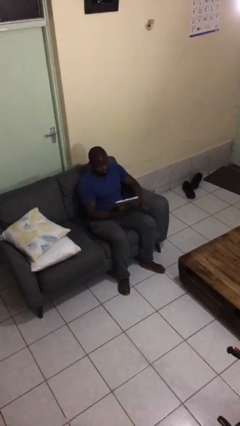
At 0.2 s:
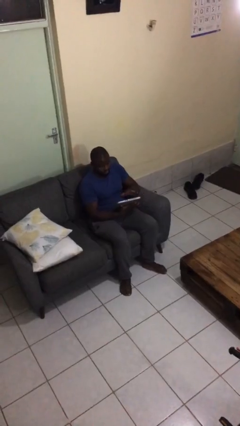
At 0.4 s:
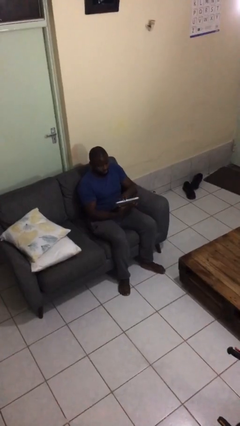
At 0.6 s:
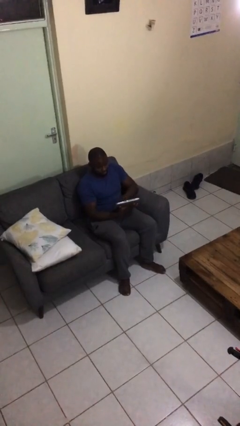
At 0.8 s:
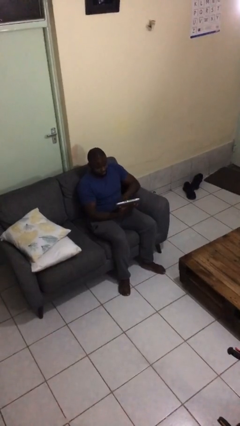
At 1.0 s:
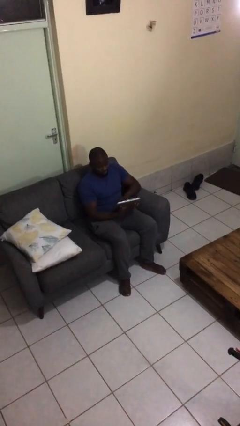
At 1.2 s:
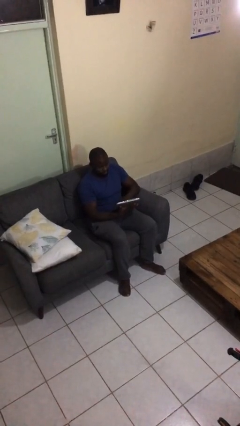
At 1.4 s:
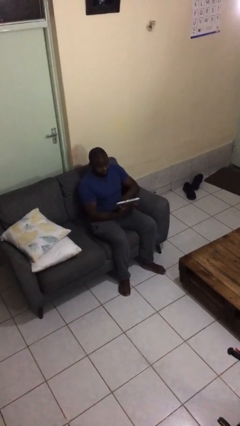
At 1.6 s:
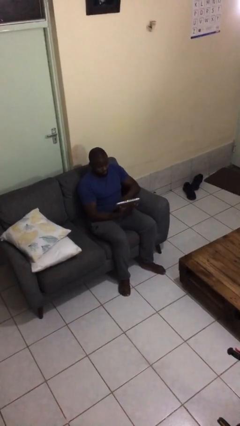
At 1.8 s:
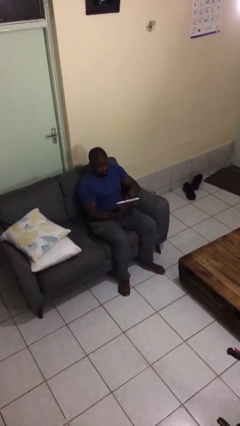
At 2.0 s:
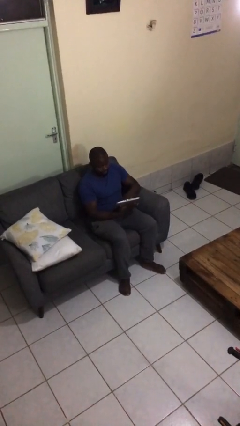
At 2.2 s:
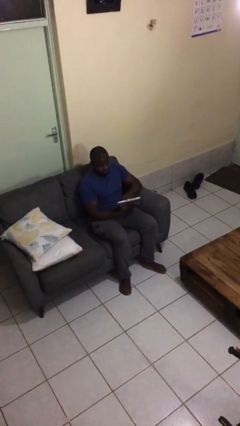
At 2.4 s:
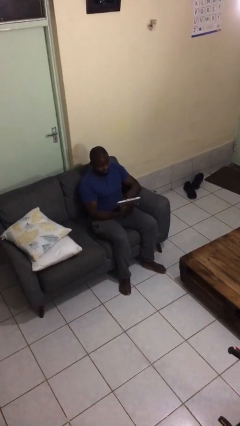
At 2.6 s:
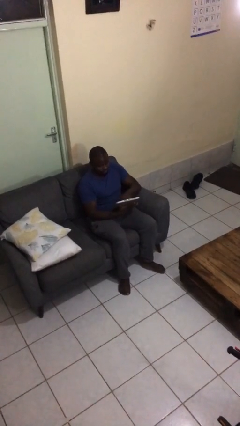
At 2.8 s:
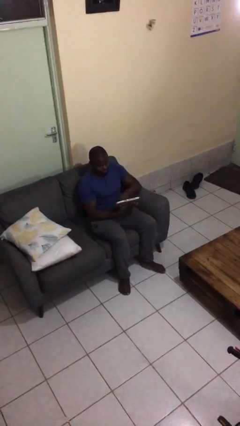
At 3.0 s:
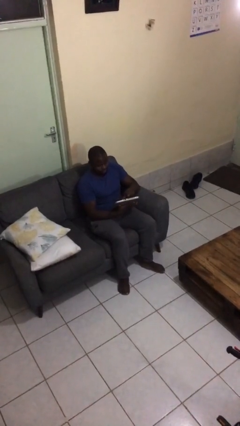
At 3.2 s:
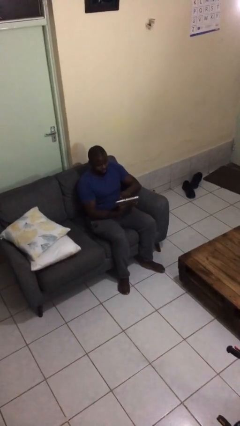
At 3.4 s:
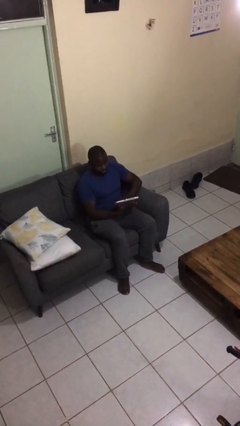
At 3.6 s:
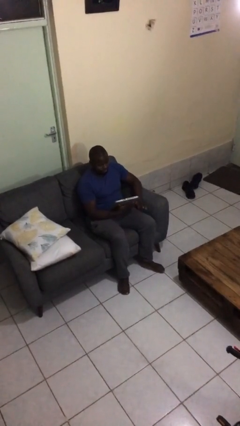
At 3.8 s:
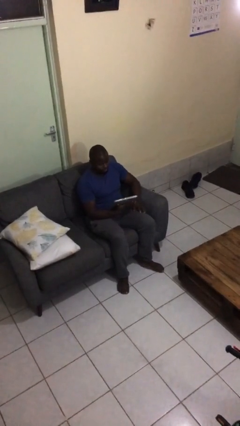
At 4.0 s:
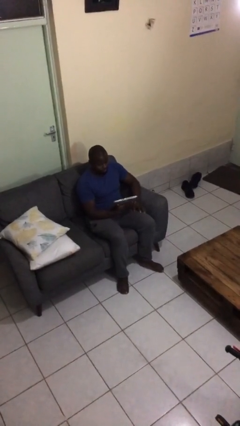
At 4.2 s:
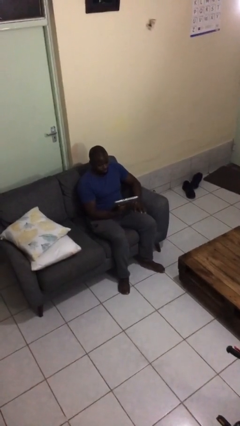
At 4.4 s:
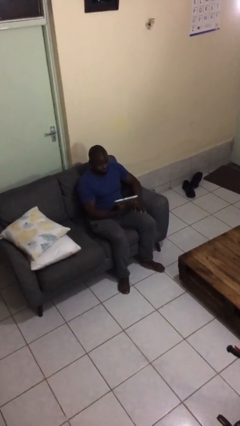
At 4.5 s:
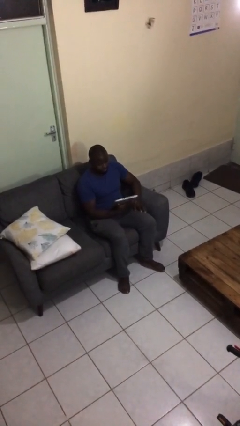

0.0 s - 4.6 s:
person interacts with tablet

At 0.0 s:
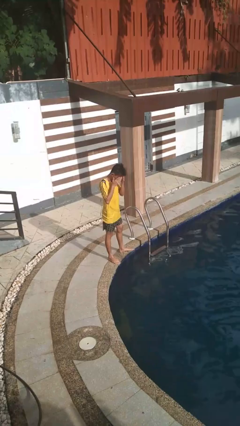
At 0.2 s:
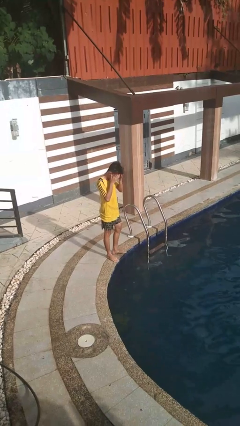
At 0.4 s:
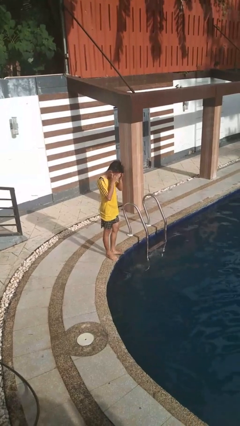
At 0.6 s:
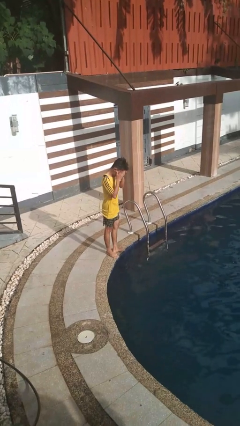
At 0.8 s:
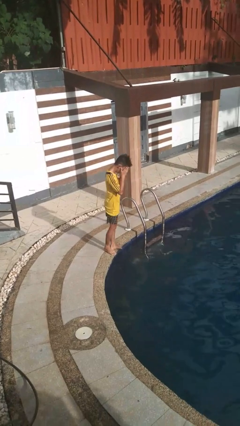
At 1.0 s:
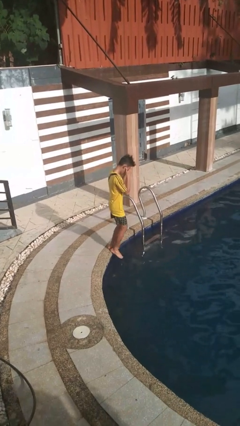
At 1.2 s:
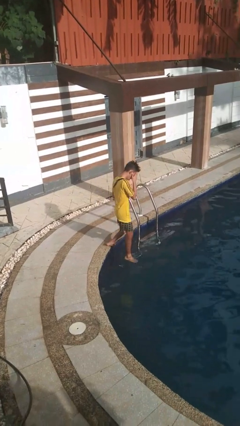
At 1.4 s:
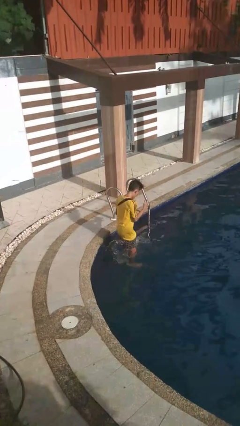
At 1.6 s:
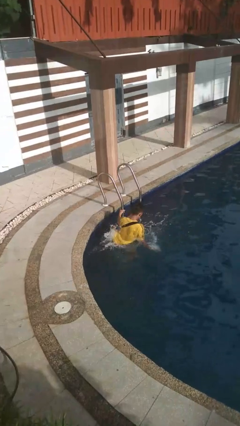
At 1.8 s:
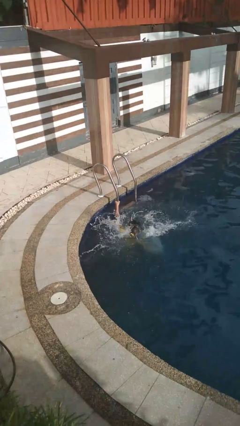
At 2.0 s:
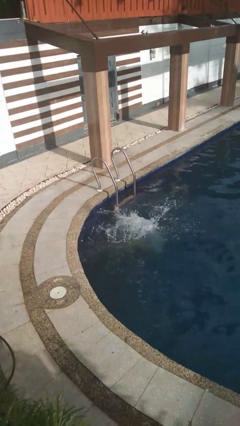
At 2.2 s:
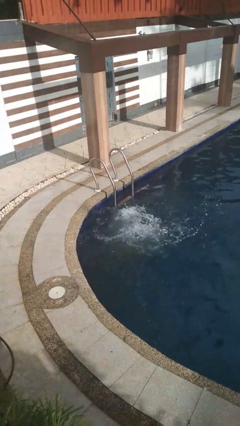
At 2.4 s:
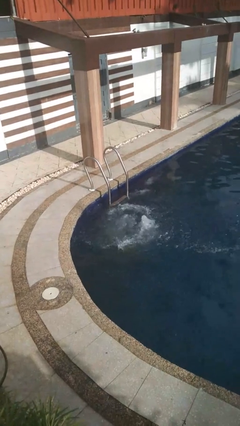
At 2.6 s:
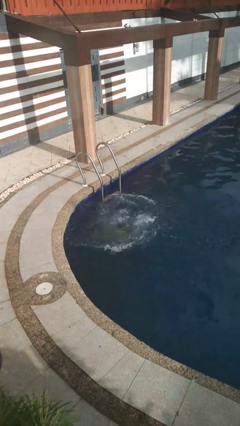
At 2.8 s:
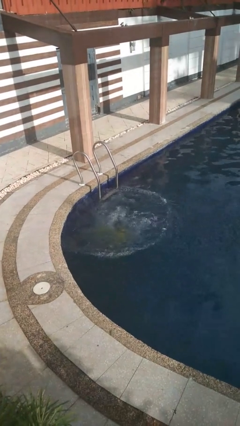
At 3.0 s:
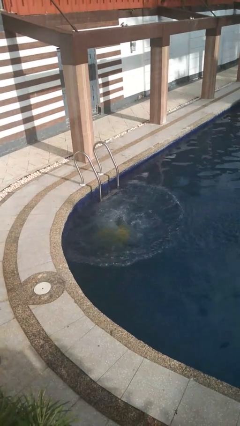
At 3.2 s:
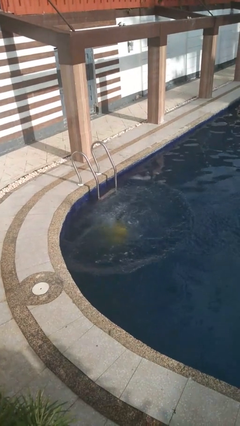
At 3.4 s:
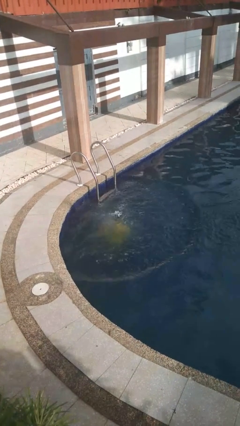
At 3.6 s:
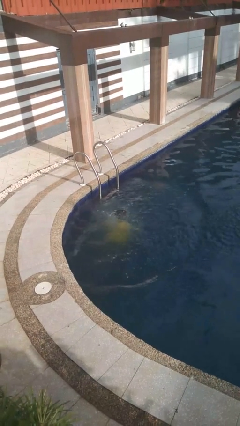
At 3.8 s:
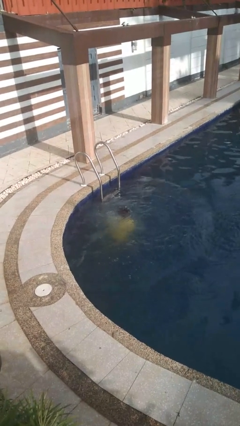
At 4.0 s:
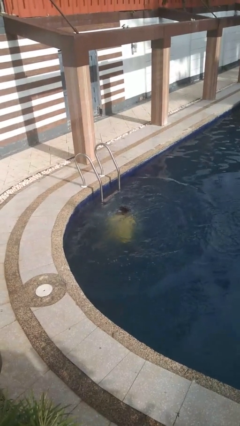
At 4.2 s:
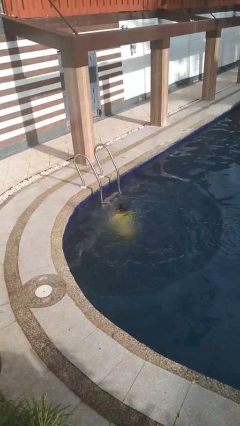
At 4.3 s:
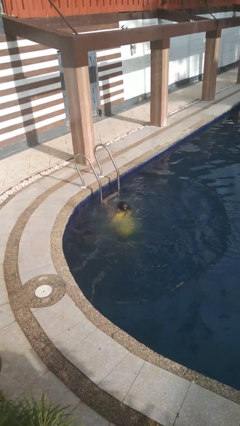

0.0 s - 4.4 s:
person falls into pool

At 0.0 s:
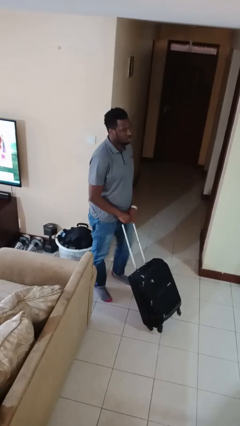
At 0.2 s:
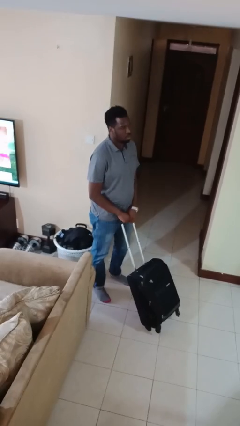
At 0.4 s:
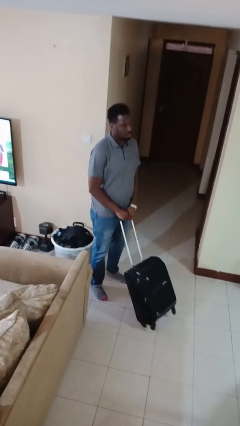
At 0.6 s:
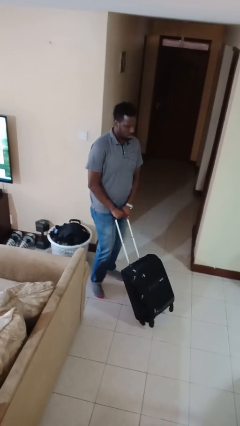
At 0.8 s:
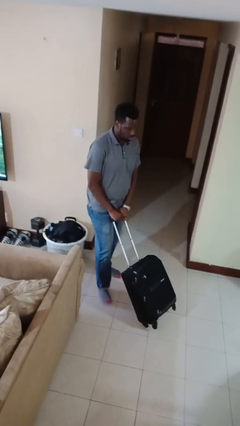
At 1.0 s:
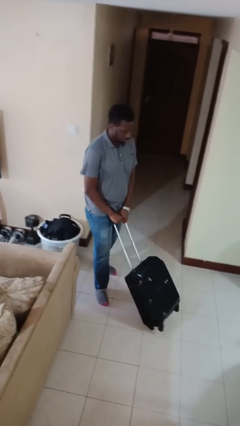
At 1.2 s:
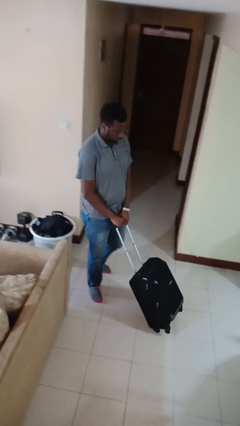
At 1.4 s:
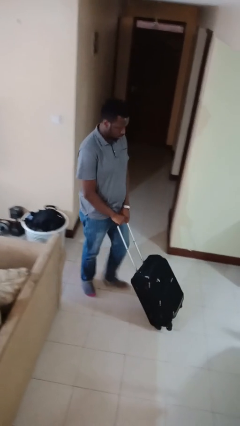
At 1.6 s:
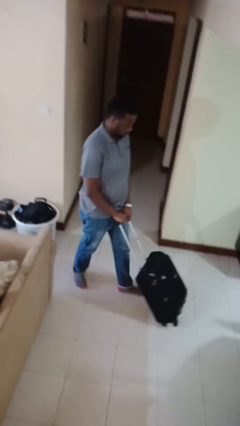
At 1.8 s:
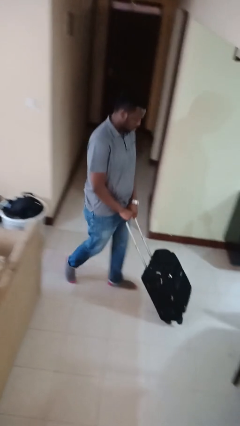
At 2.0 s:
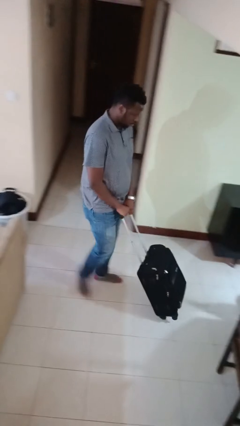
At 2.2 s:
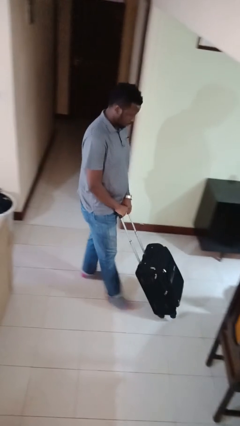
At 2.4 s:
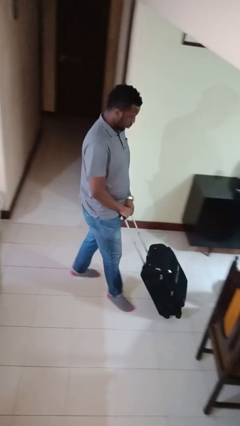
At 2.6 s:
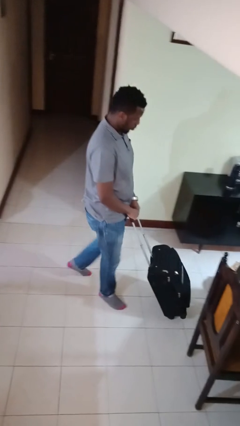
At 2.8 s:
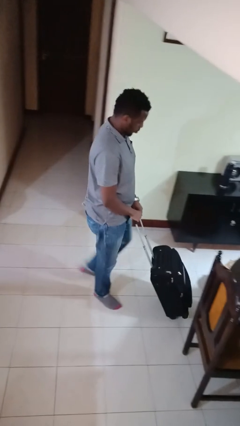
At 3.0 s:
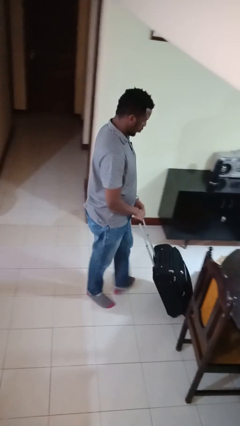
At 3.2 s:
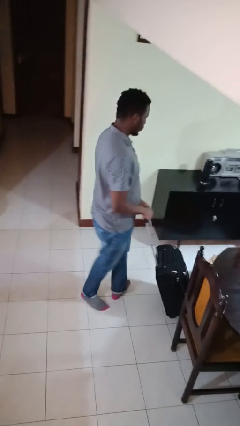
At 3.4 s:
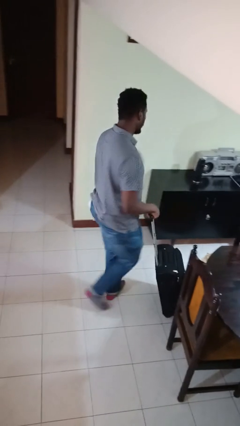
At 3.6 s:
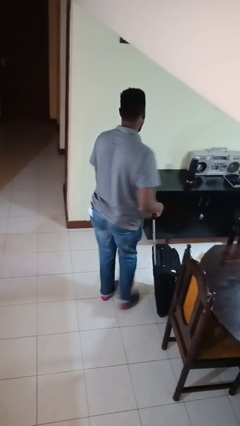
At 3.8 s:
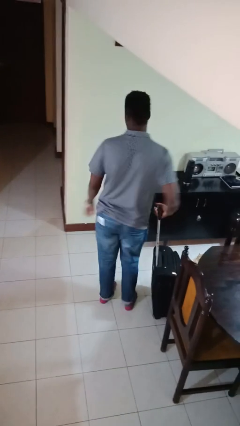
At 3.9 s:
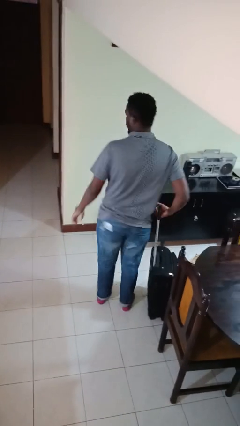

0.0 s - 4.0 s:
person pushes wheeled cart

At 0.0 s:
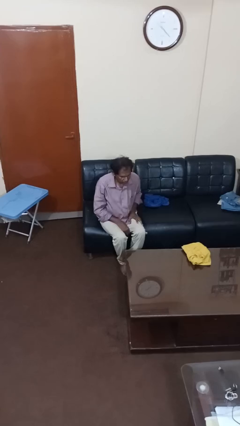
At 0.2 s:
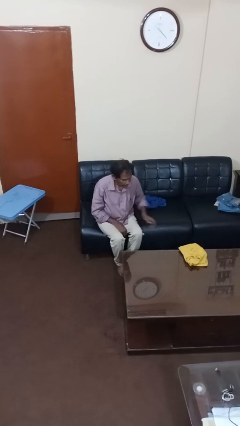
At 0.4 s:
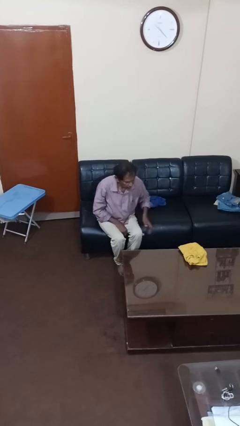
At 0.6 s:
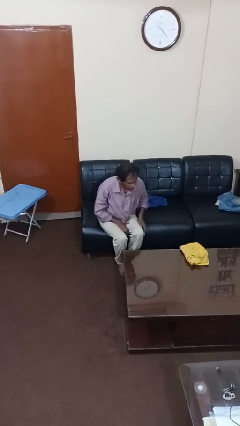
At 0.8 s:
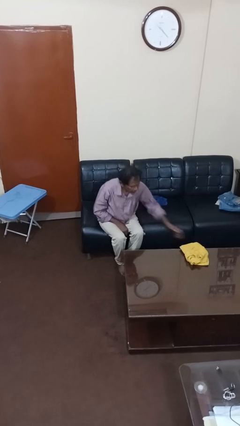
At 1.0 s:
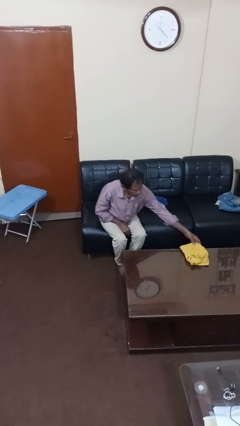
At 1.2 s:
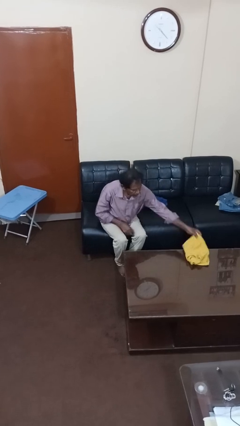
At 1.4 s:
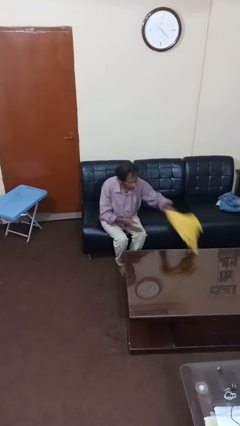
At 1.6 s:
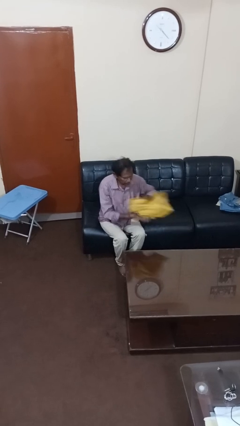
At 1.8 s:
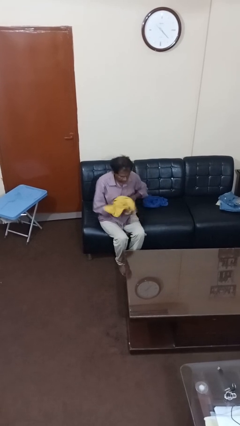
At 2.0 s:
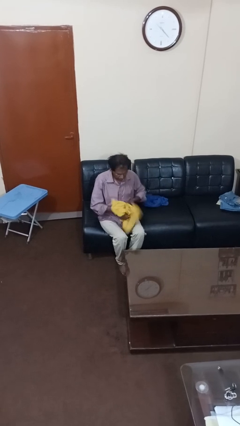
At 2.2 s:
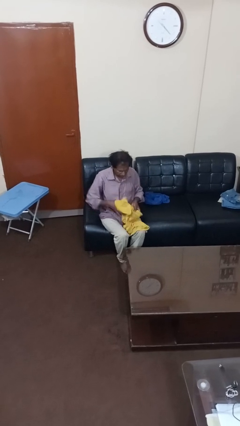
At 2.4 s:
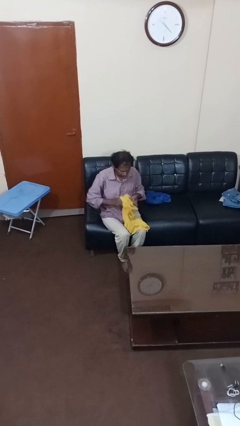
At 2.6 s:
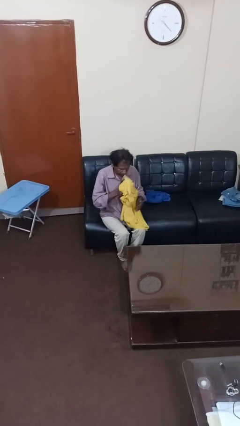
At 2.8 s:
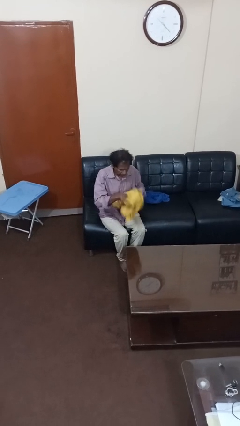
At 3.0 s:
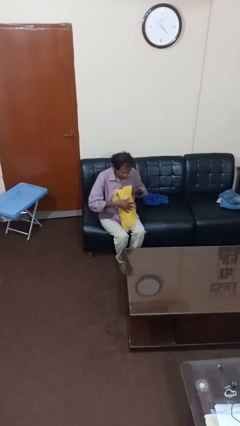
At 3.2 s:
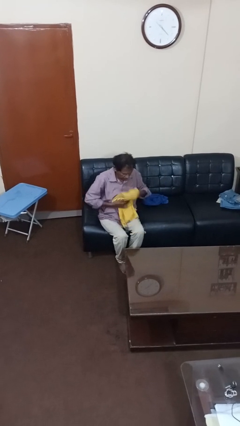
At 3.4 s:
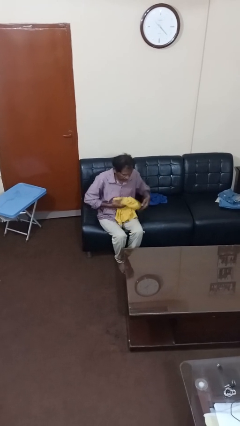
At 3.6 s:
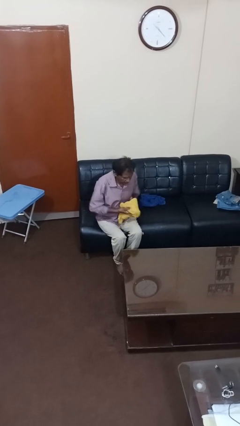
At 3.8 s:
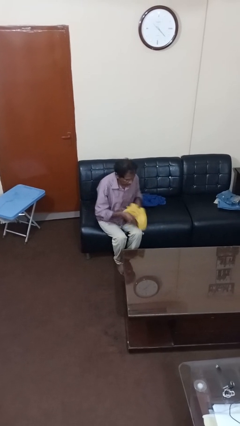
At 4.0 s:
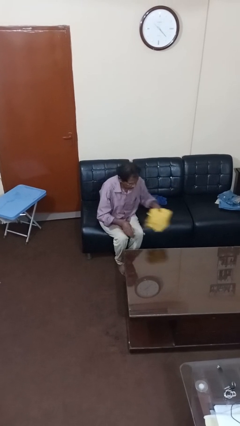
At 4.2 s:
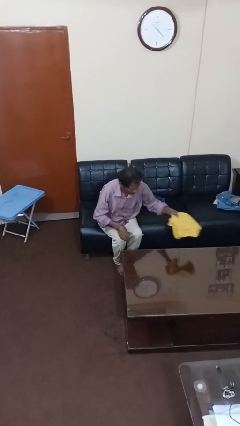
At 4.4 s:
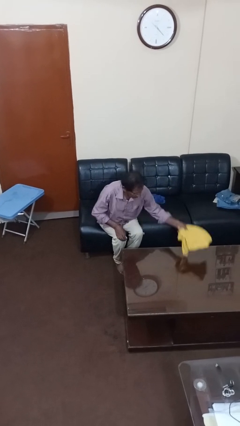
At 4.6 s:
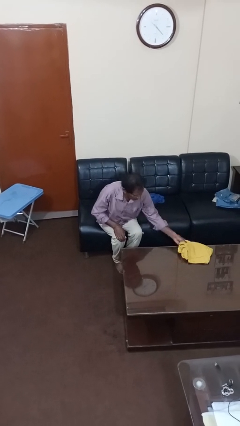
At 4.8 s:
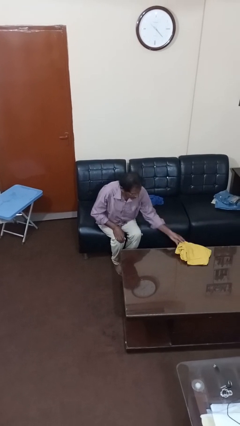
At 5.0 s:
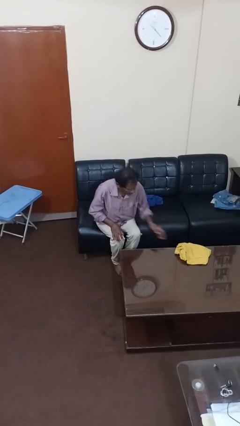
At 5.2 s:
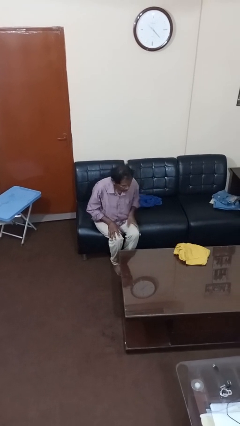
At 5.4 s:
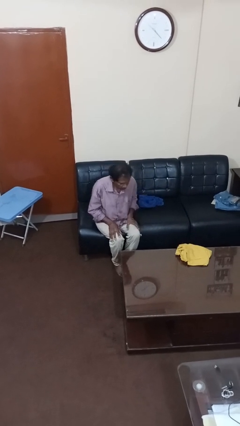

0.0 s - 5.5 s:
person folds shirt
